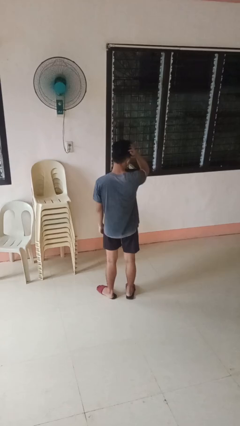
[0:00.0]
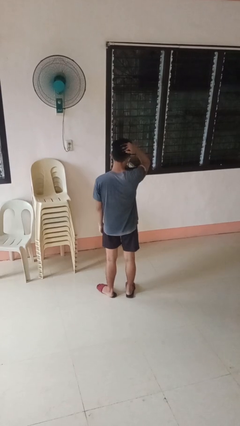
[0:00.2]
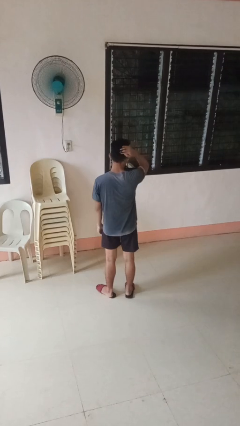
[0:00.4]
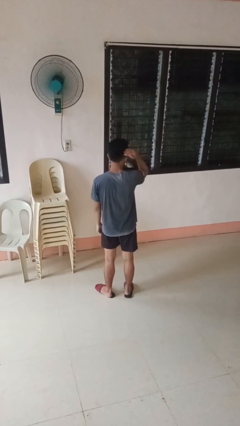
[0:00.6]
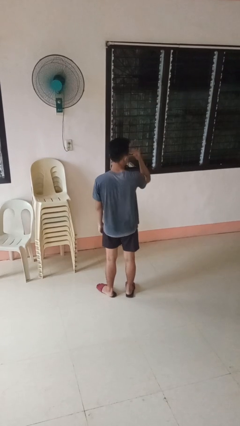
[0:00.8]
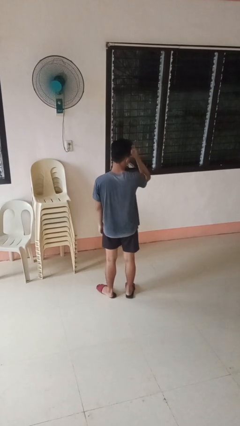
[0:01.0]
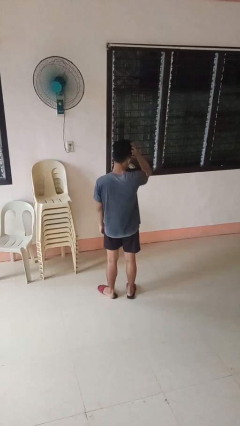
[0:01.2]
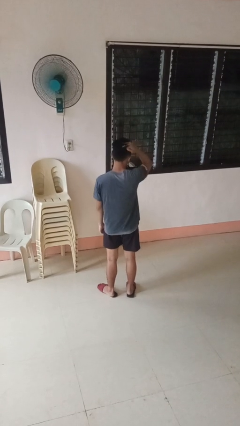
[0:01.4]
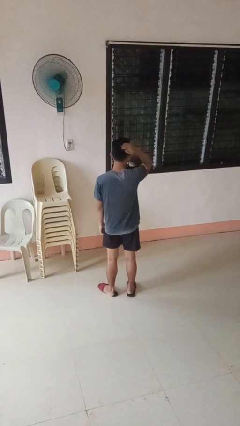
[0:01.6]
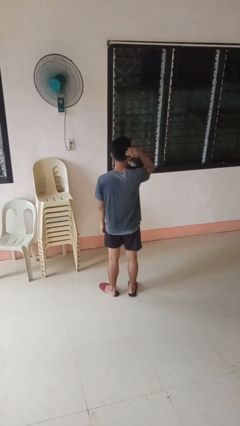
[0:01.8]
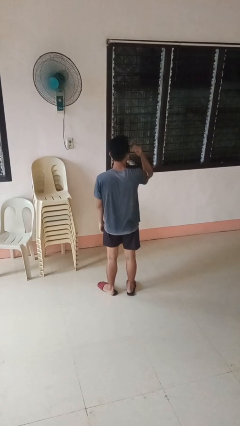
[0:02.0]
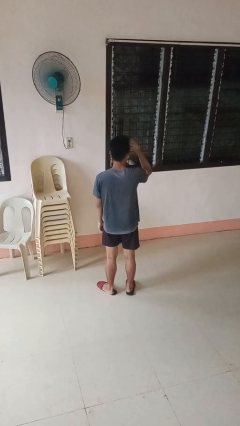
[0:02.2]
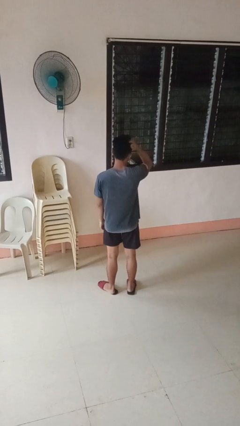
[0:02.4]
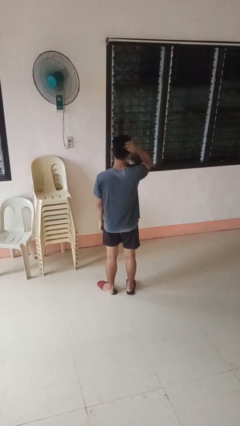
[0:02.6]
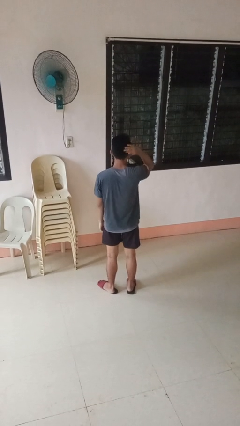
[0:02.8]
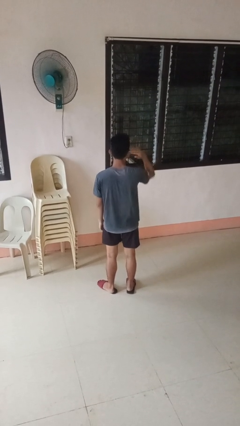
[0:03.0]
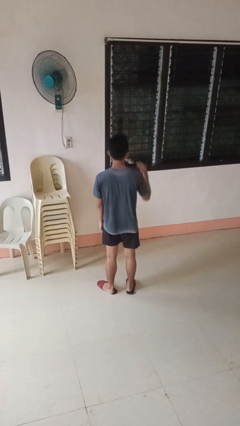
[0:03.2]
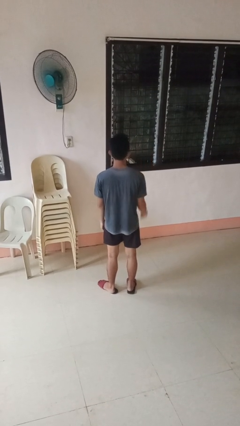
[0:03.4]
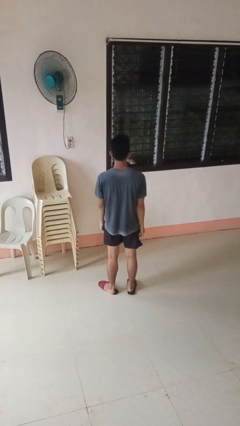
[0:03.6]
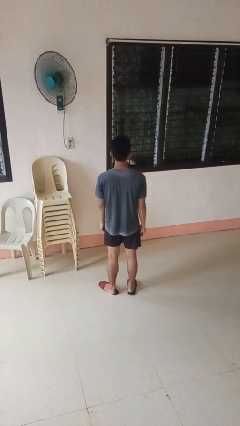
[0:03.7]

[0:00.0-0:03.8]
person strokes hair

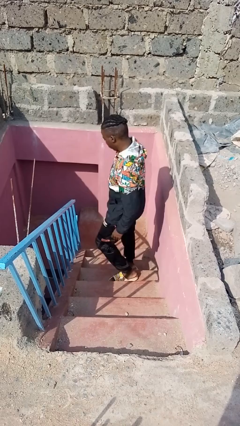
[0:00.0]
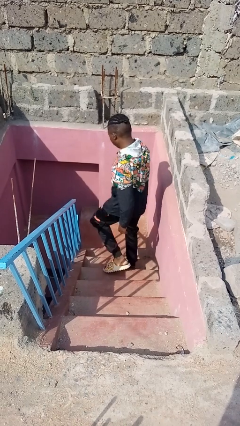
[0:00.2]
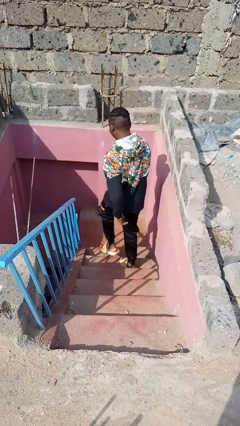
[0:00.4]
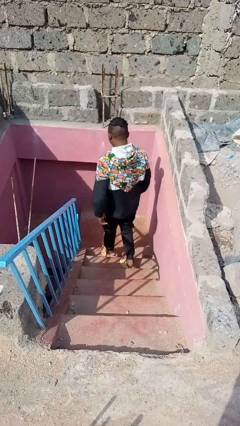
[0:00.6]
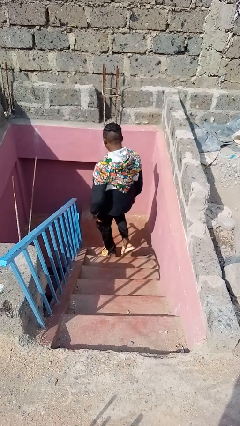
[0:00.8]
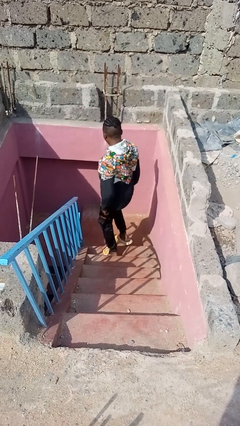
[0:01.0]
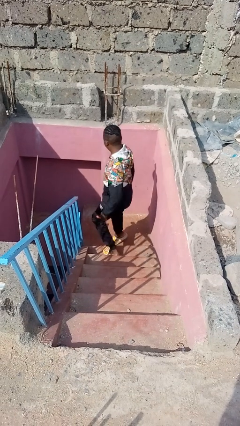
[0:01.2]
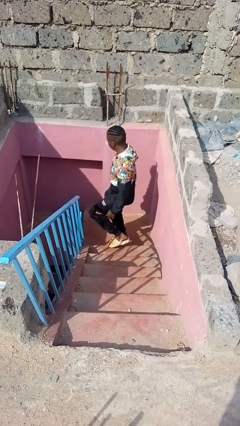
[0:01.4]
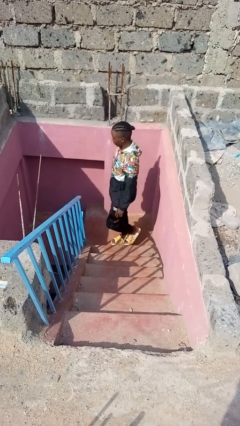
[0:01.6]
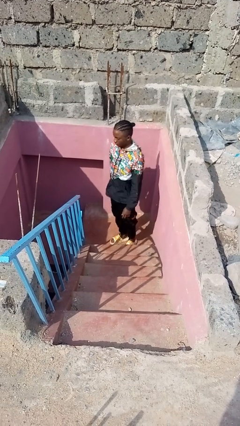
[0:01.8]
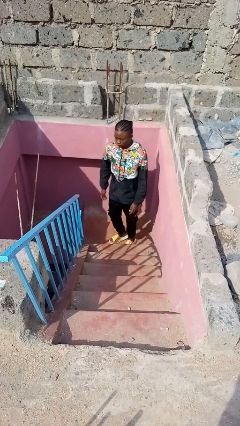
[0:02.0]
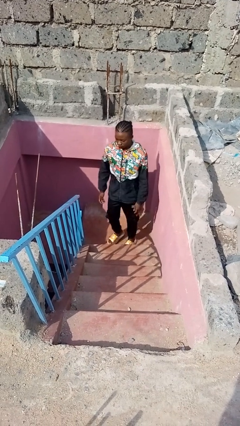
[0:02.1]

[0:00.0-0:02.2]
person climbs down stairs

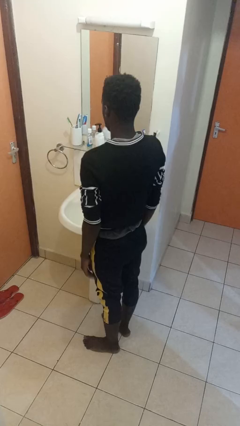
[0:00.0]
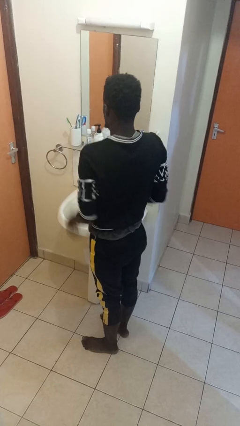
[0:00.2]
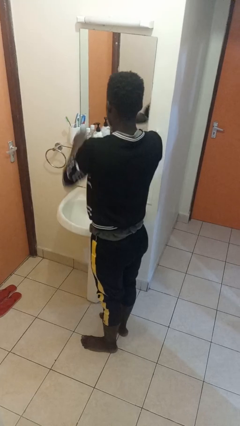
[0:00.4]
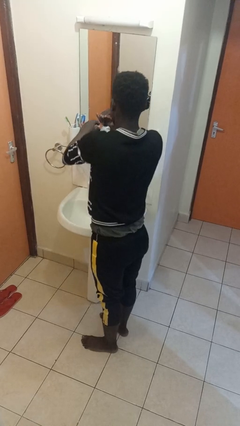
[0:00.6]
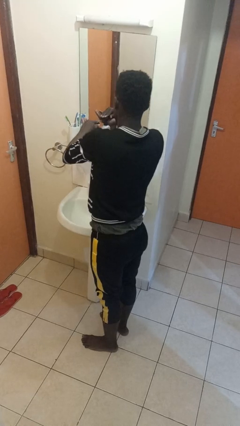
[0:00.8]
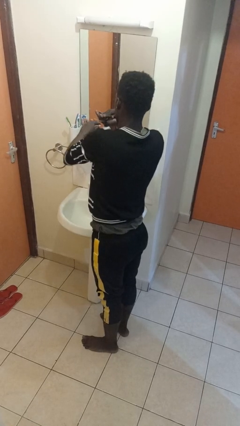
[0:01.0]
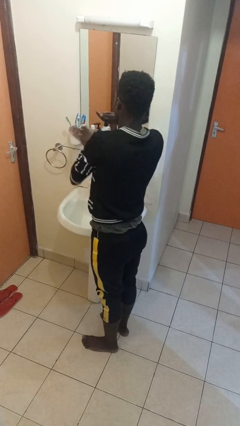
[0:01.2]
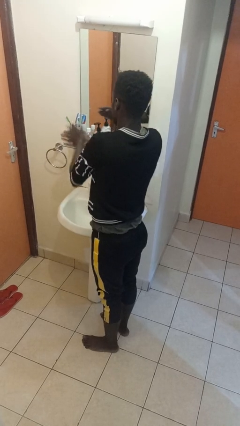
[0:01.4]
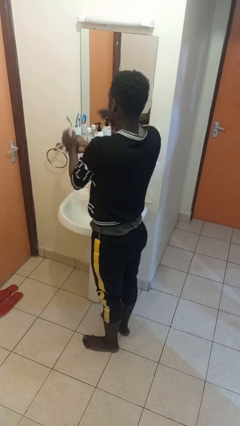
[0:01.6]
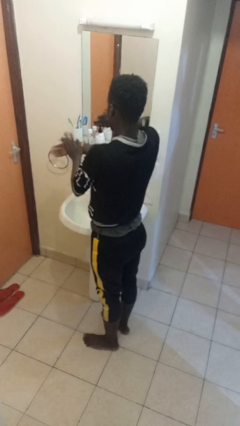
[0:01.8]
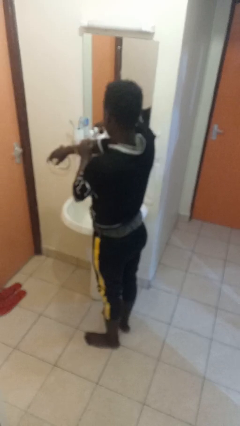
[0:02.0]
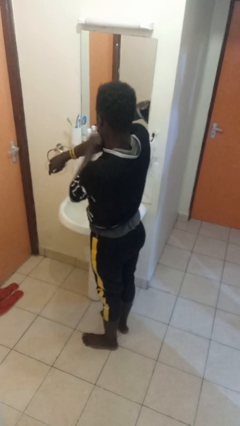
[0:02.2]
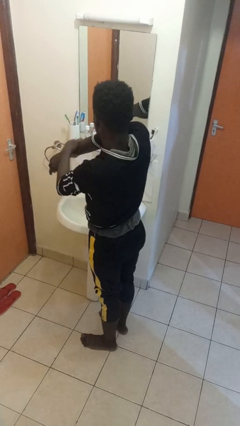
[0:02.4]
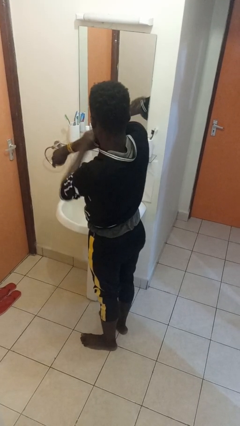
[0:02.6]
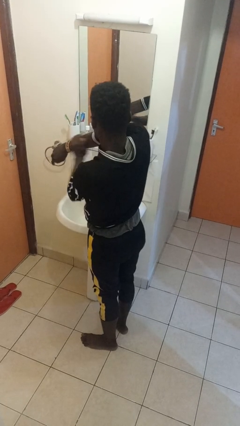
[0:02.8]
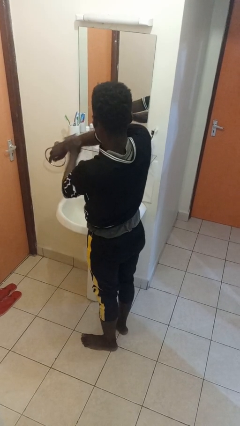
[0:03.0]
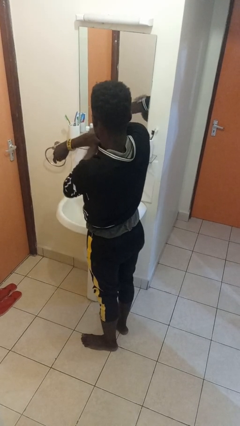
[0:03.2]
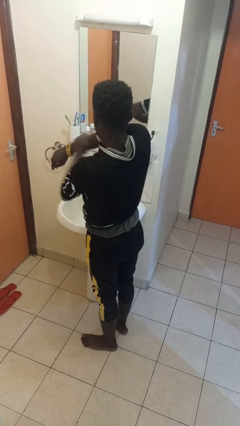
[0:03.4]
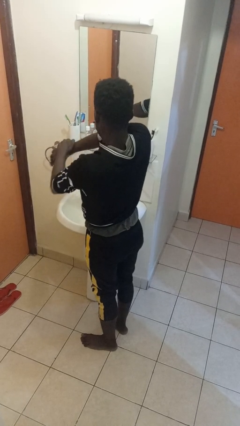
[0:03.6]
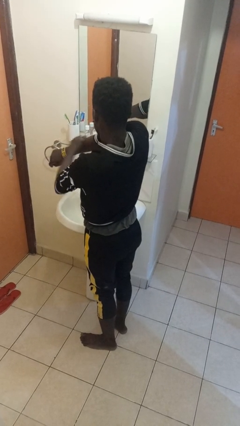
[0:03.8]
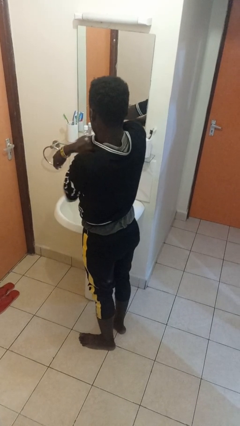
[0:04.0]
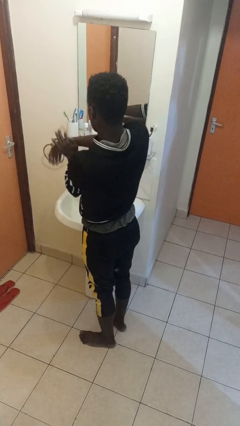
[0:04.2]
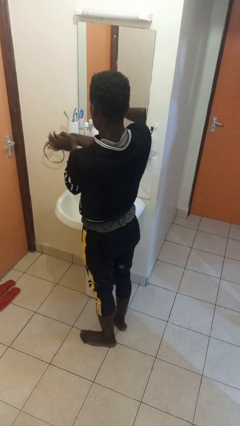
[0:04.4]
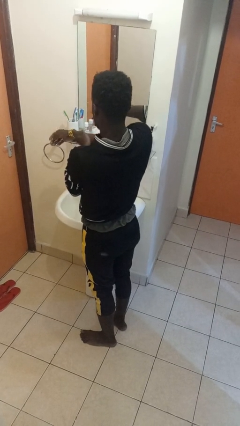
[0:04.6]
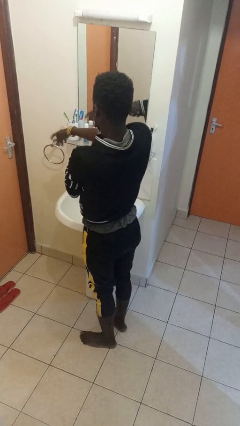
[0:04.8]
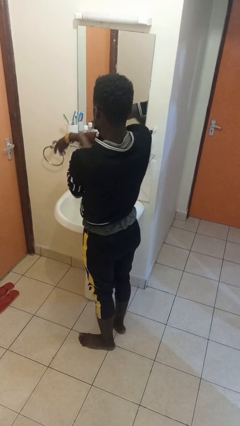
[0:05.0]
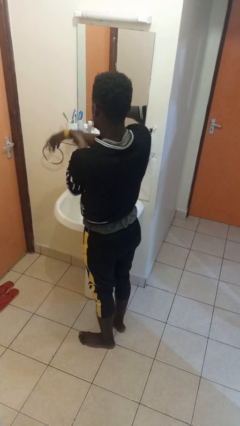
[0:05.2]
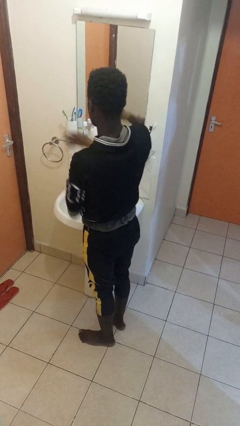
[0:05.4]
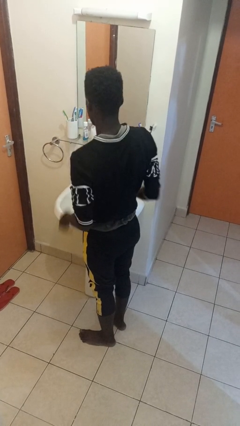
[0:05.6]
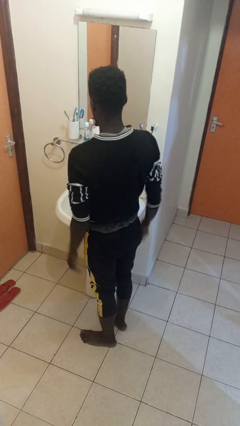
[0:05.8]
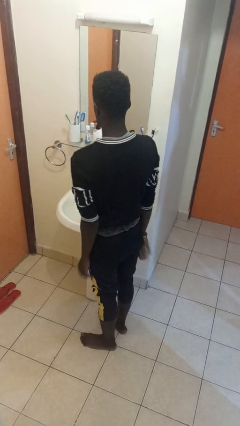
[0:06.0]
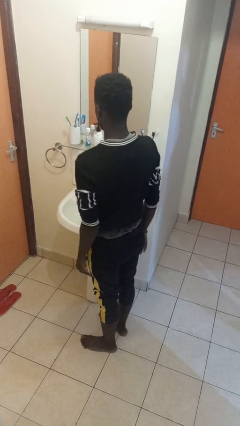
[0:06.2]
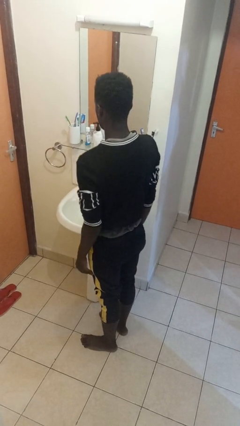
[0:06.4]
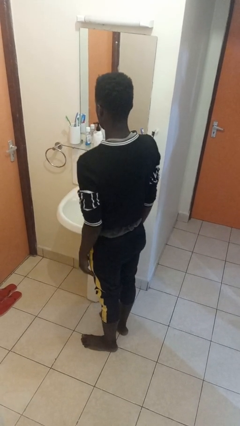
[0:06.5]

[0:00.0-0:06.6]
person applies facial moisturizer

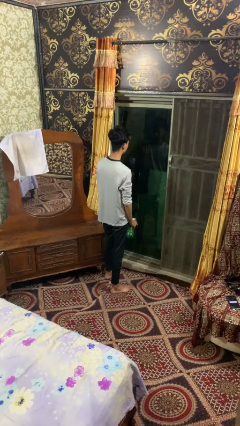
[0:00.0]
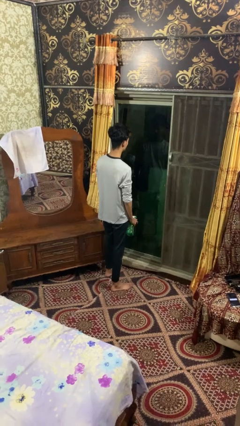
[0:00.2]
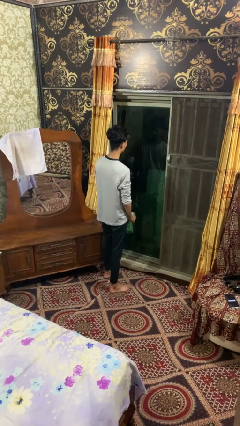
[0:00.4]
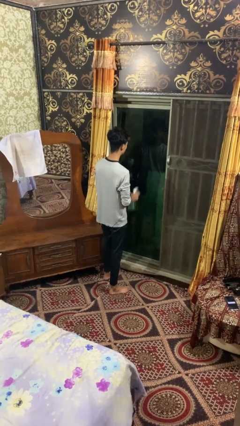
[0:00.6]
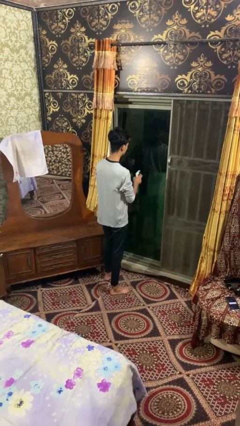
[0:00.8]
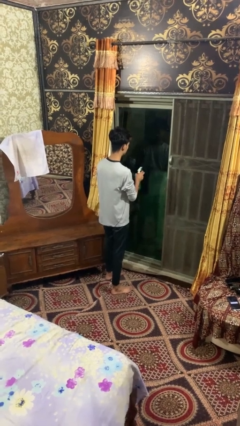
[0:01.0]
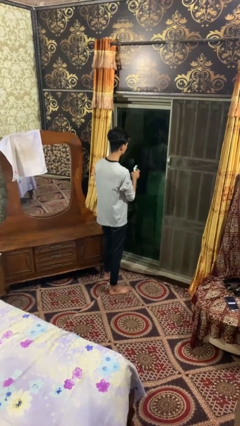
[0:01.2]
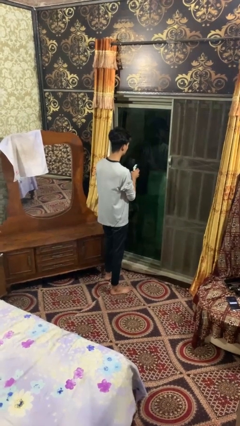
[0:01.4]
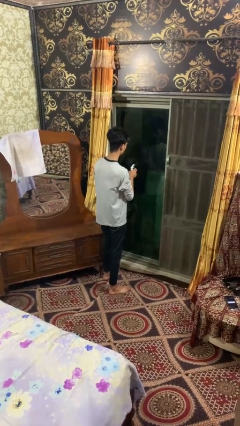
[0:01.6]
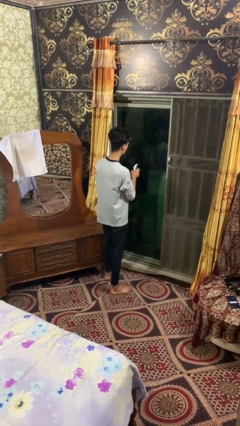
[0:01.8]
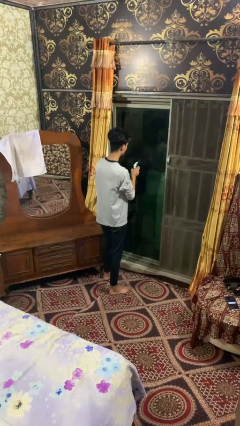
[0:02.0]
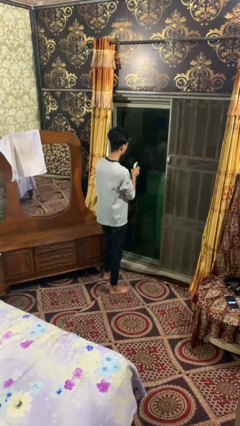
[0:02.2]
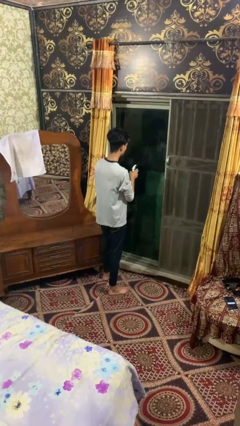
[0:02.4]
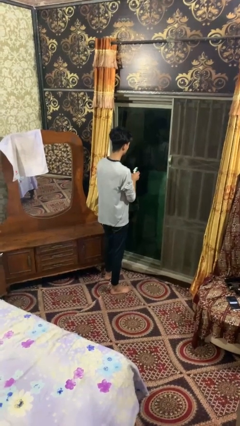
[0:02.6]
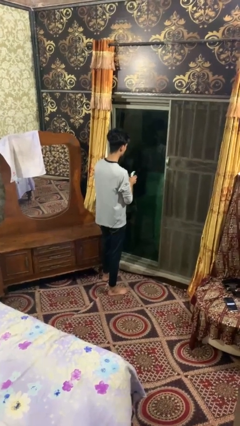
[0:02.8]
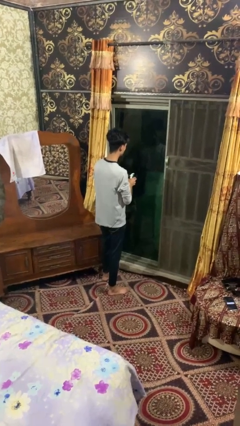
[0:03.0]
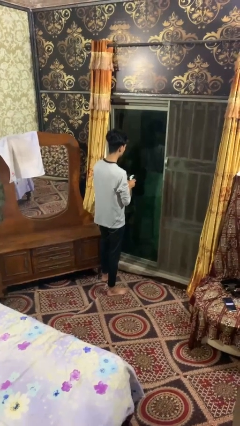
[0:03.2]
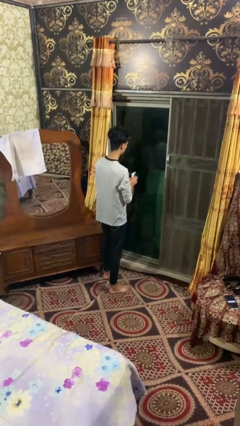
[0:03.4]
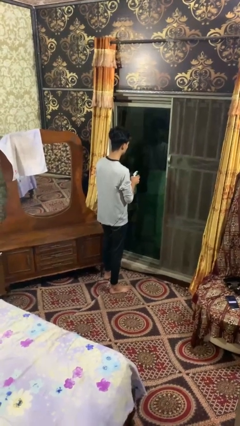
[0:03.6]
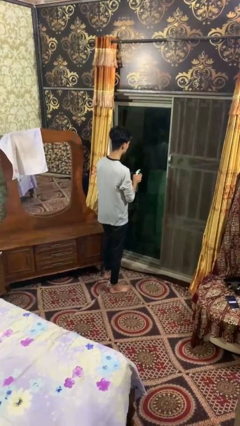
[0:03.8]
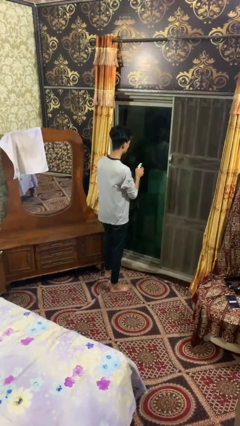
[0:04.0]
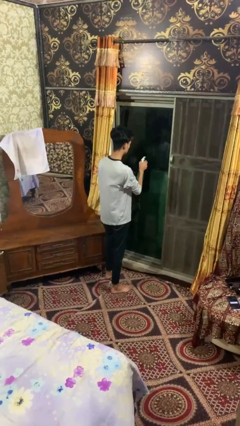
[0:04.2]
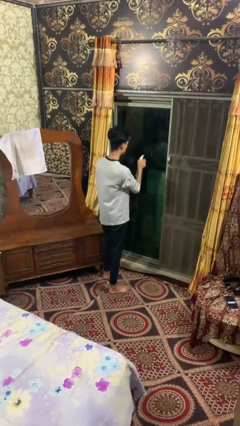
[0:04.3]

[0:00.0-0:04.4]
person sprays from bottle
